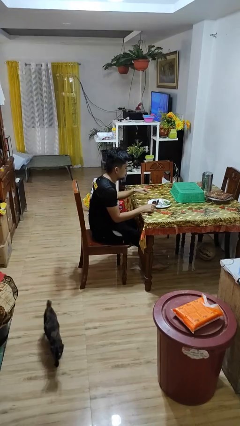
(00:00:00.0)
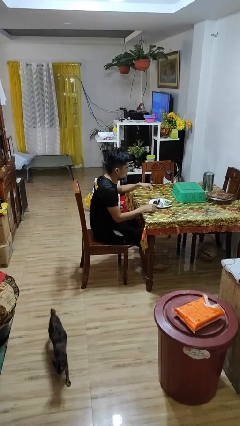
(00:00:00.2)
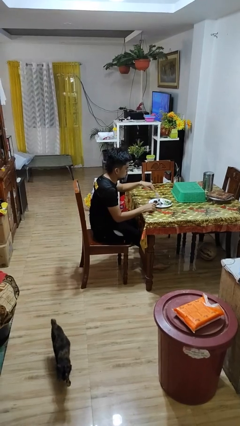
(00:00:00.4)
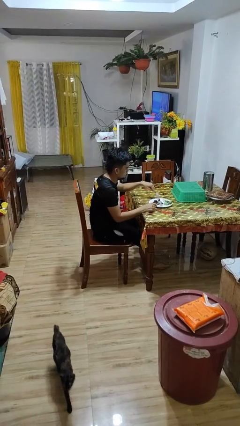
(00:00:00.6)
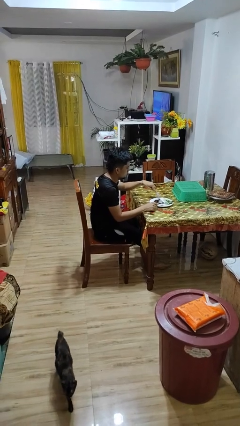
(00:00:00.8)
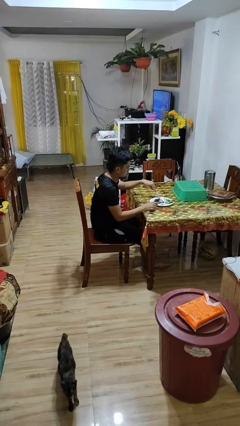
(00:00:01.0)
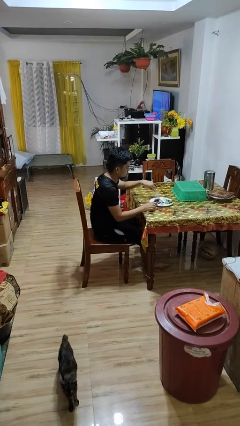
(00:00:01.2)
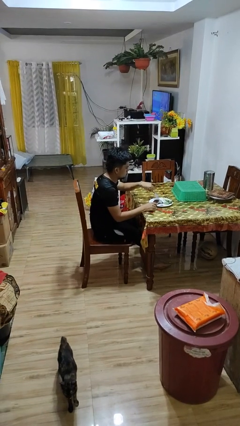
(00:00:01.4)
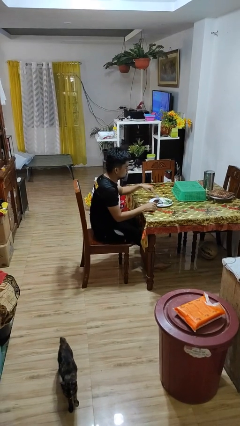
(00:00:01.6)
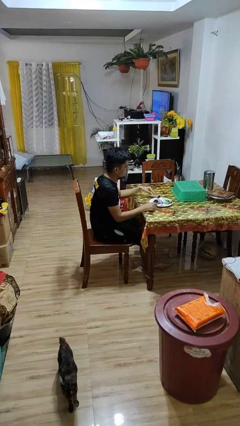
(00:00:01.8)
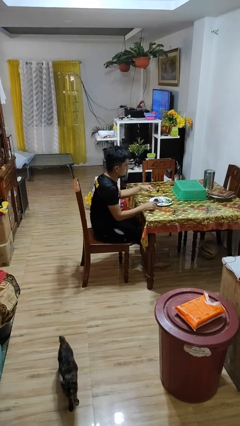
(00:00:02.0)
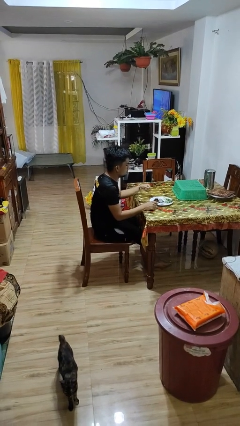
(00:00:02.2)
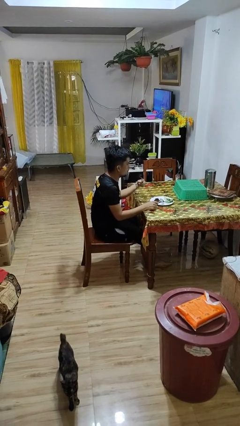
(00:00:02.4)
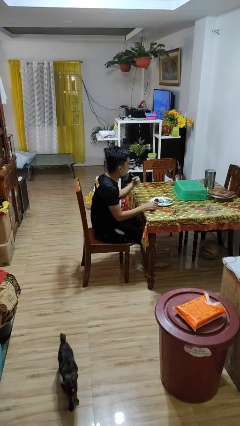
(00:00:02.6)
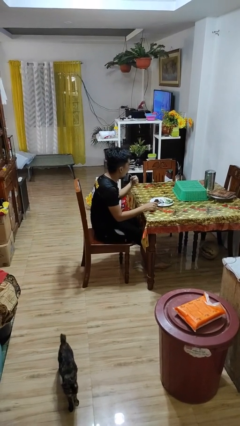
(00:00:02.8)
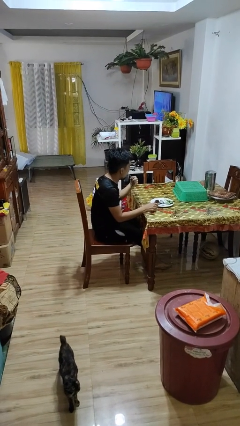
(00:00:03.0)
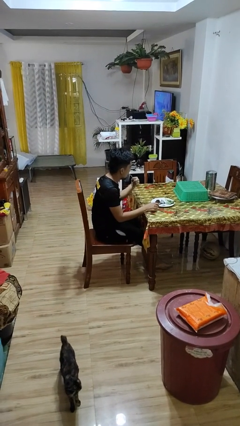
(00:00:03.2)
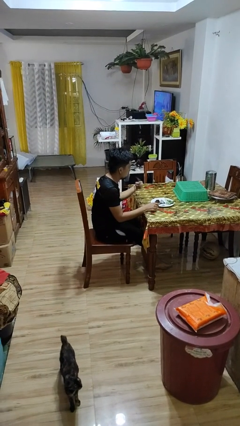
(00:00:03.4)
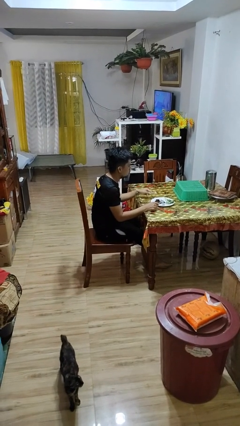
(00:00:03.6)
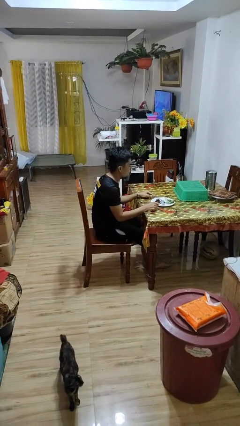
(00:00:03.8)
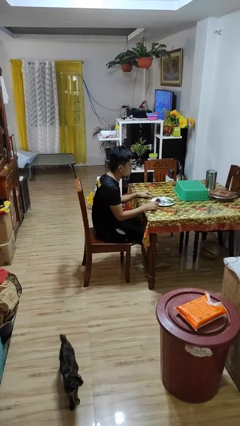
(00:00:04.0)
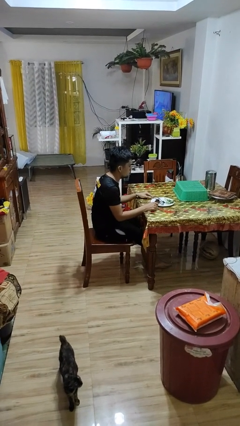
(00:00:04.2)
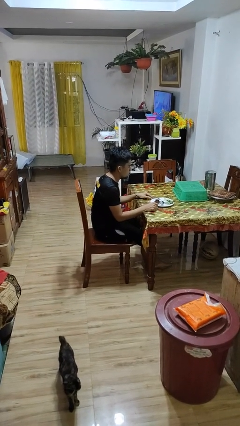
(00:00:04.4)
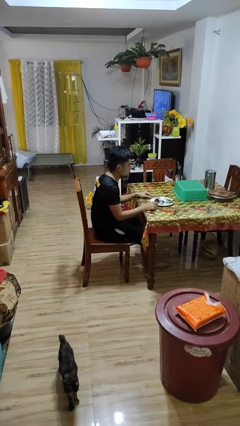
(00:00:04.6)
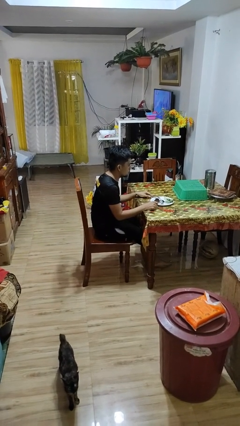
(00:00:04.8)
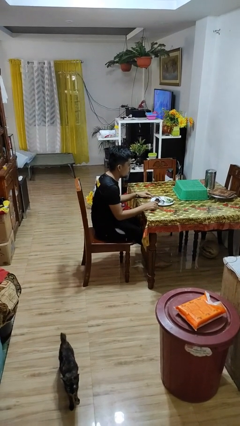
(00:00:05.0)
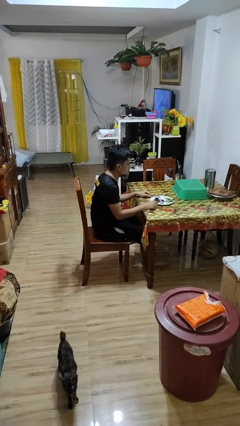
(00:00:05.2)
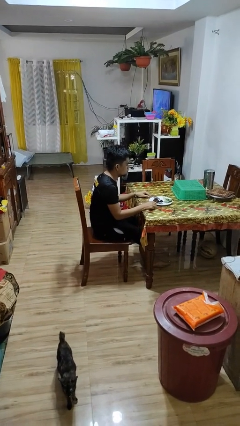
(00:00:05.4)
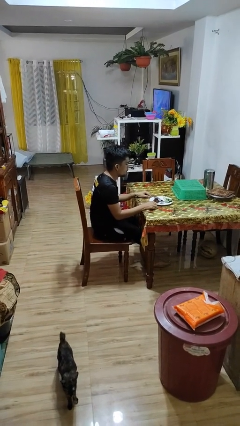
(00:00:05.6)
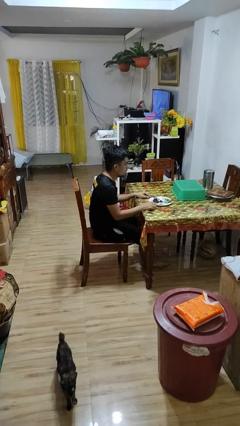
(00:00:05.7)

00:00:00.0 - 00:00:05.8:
person eats with utensil

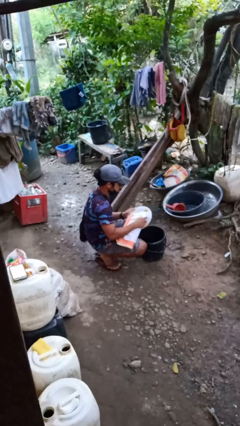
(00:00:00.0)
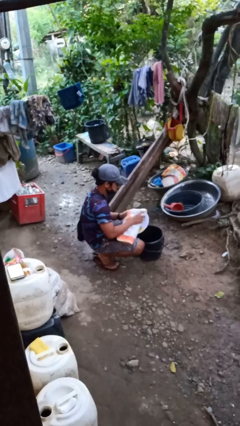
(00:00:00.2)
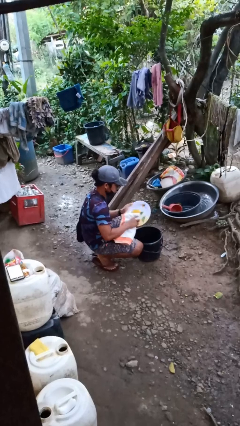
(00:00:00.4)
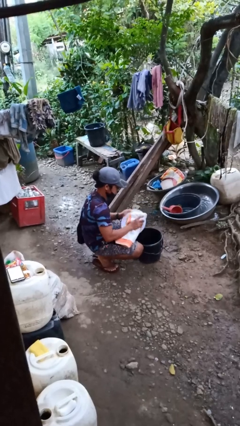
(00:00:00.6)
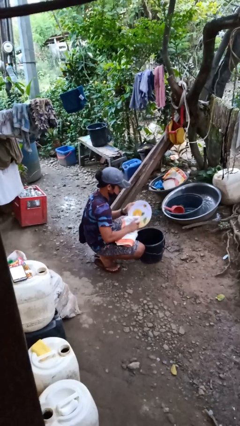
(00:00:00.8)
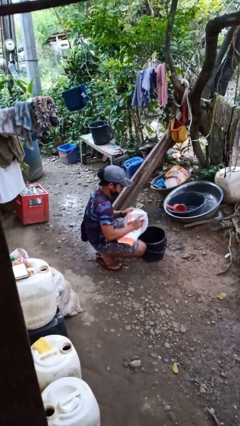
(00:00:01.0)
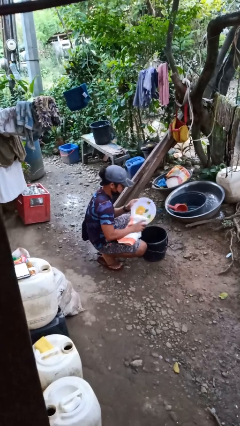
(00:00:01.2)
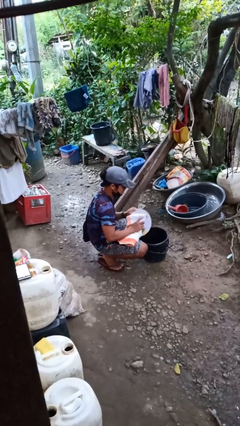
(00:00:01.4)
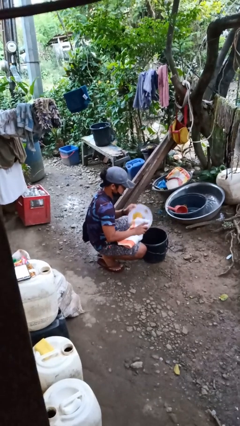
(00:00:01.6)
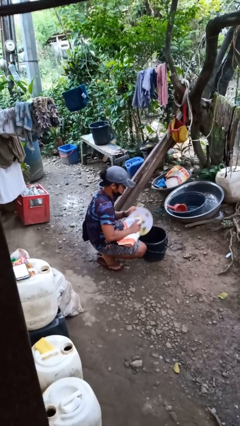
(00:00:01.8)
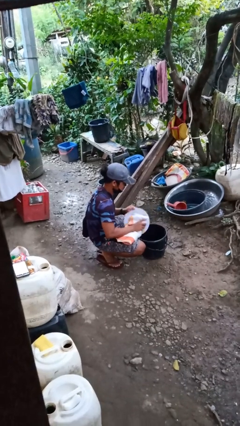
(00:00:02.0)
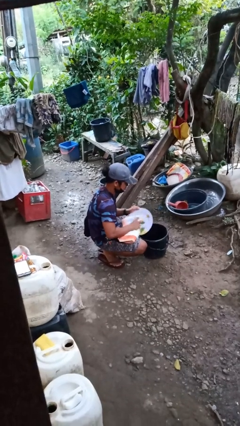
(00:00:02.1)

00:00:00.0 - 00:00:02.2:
person dries dish

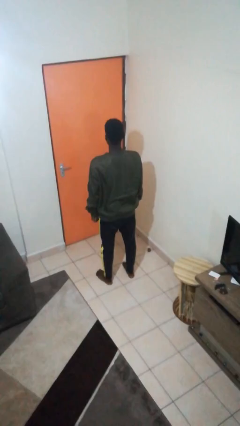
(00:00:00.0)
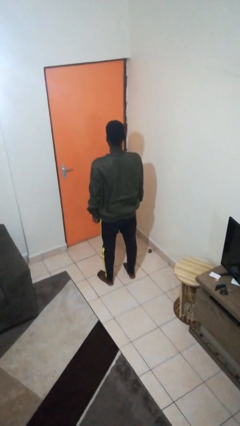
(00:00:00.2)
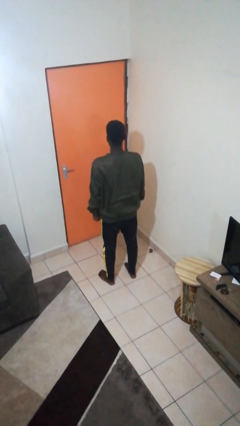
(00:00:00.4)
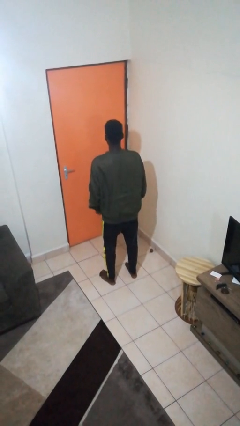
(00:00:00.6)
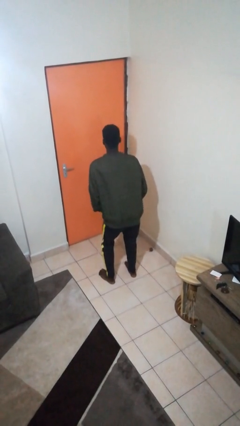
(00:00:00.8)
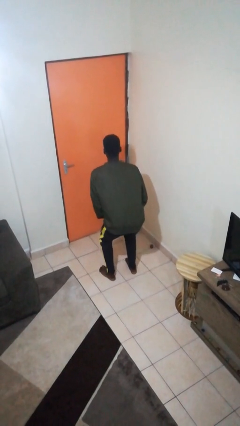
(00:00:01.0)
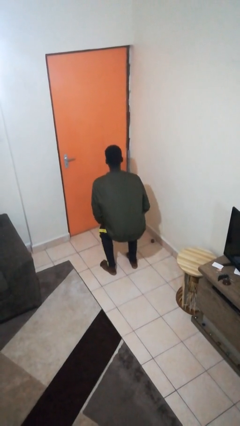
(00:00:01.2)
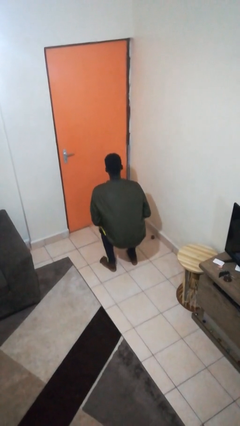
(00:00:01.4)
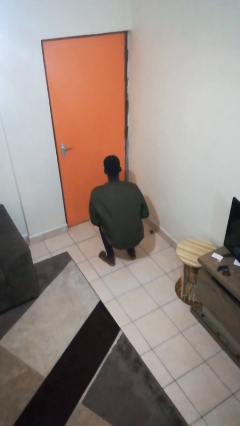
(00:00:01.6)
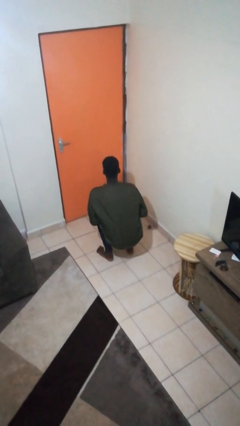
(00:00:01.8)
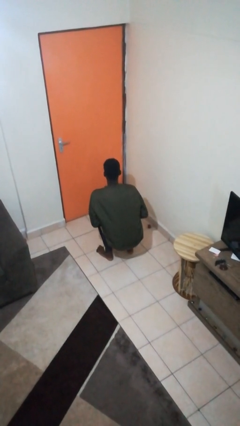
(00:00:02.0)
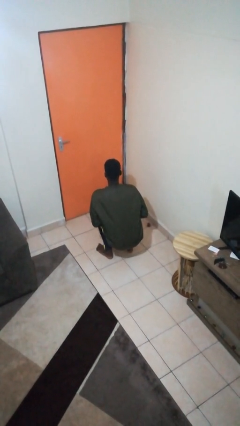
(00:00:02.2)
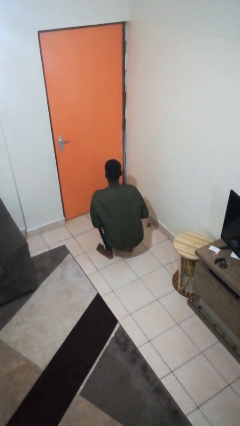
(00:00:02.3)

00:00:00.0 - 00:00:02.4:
person squats

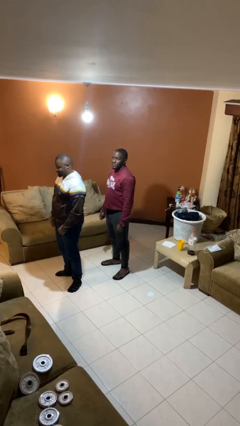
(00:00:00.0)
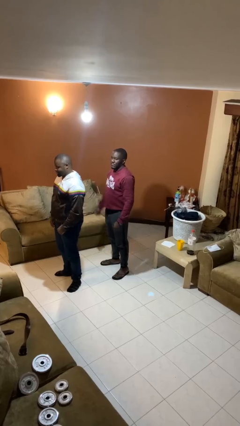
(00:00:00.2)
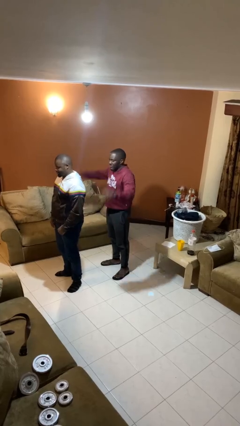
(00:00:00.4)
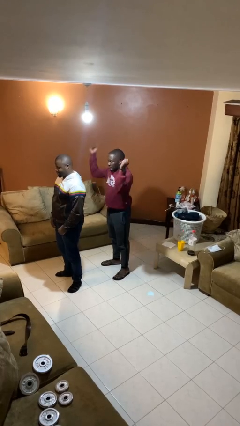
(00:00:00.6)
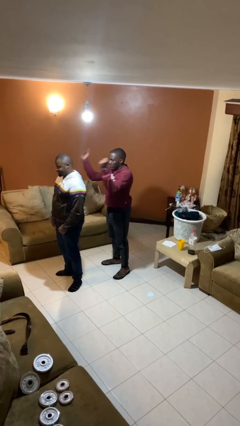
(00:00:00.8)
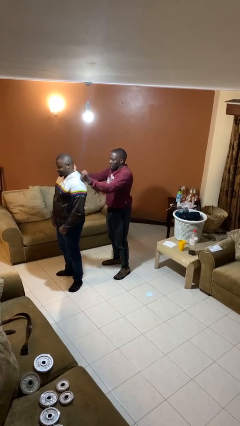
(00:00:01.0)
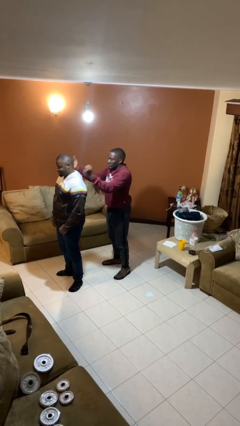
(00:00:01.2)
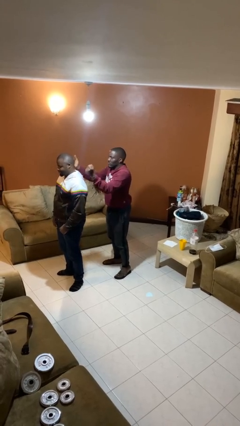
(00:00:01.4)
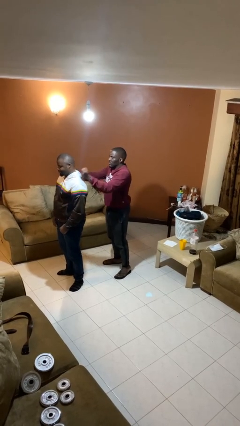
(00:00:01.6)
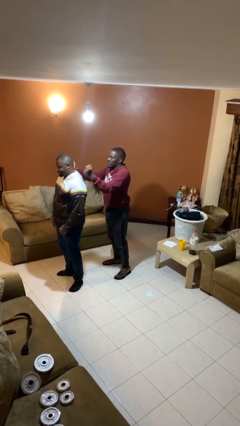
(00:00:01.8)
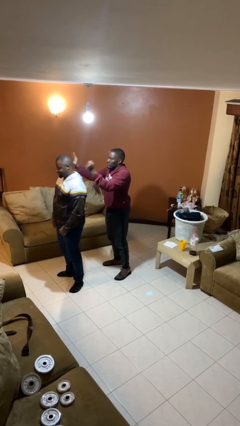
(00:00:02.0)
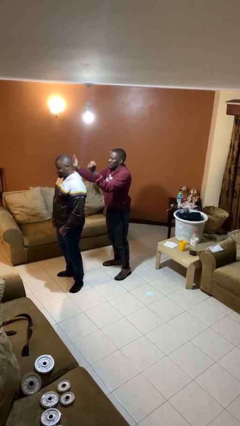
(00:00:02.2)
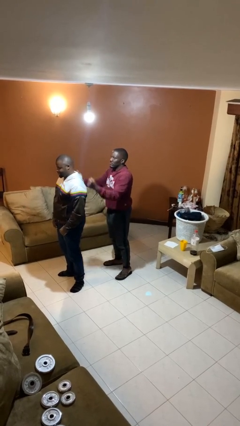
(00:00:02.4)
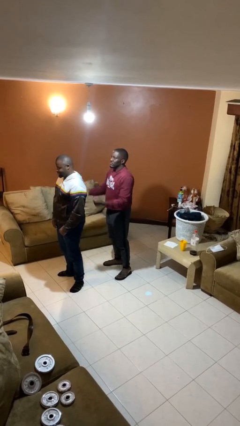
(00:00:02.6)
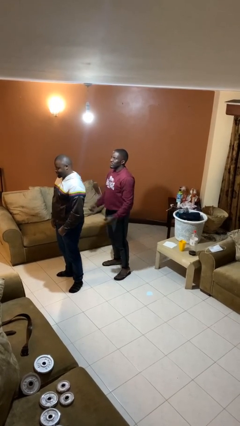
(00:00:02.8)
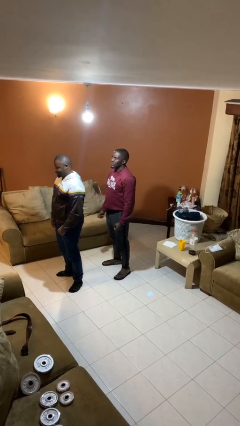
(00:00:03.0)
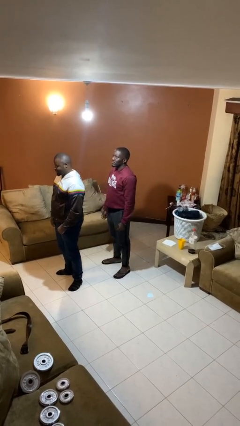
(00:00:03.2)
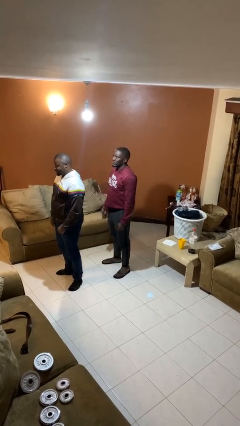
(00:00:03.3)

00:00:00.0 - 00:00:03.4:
person pounds shoulders of person

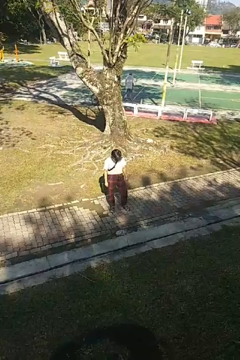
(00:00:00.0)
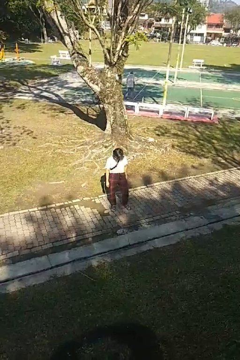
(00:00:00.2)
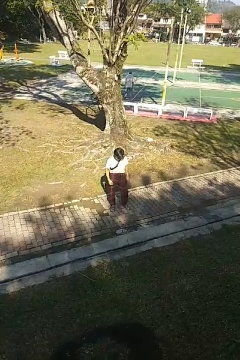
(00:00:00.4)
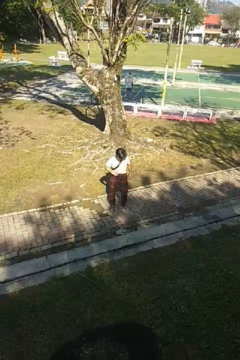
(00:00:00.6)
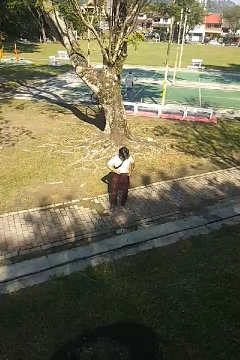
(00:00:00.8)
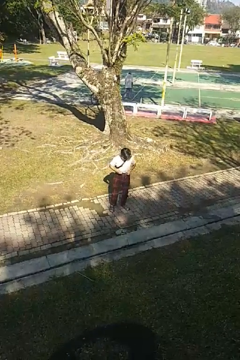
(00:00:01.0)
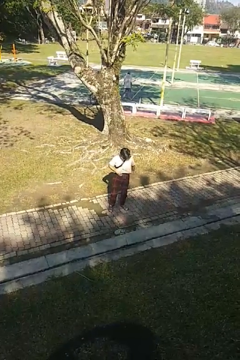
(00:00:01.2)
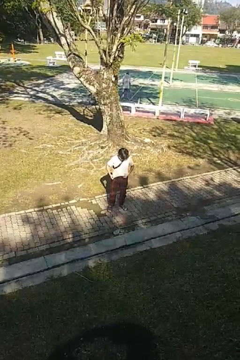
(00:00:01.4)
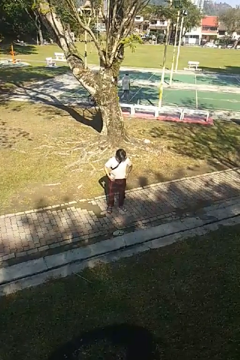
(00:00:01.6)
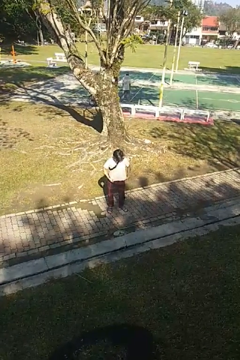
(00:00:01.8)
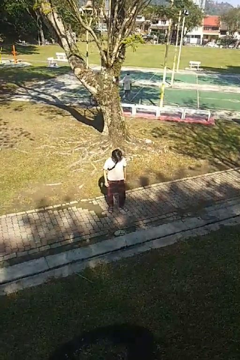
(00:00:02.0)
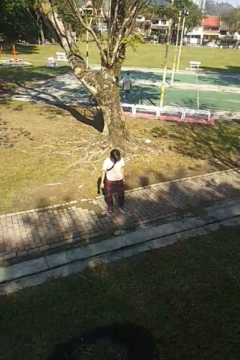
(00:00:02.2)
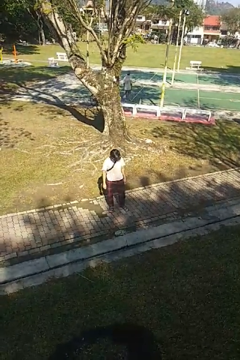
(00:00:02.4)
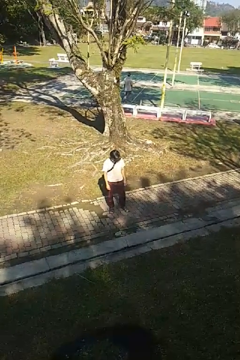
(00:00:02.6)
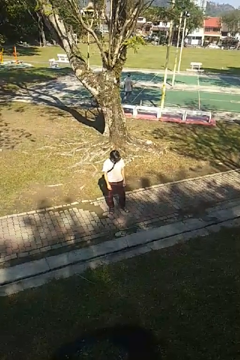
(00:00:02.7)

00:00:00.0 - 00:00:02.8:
person untucks shirt

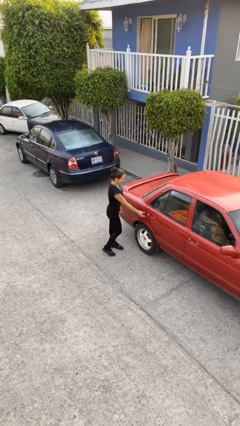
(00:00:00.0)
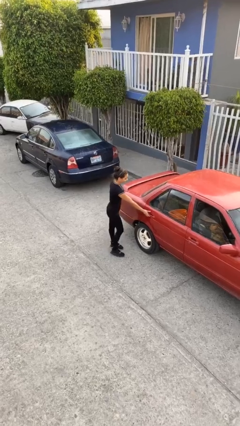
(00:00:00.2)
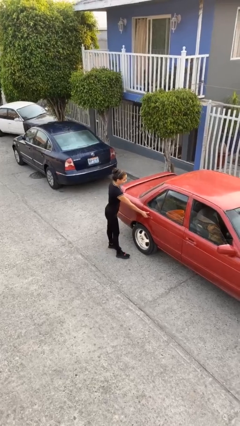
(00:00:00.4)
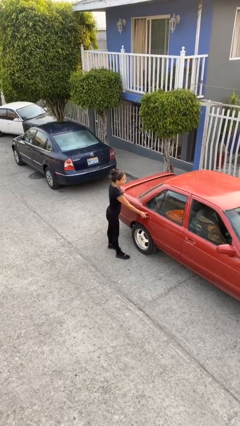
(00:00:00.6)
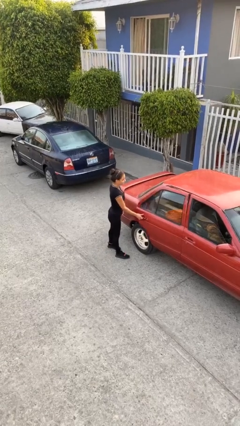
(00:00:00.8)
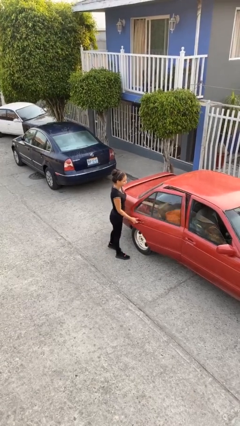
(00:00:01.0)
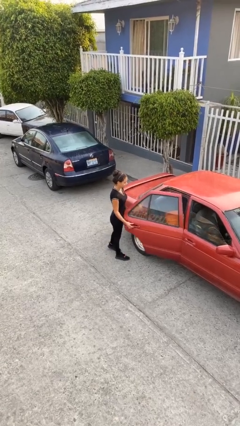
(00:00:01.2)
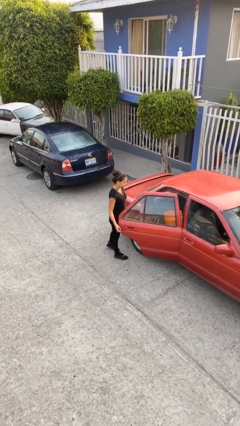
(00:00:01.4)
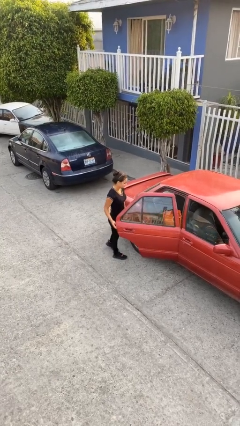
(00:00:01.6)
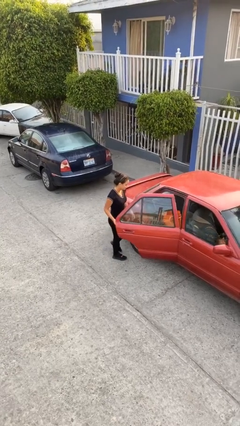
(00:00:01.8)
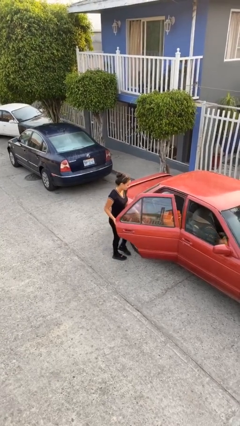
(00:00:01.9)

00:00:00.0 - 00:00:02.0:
person opens car door
